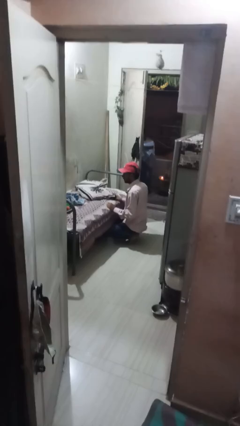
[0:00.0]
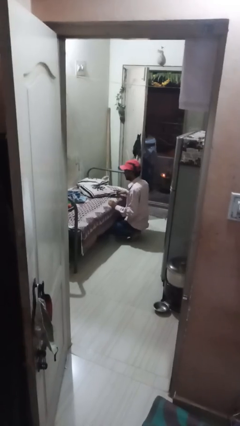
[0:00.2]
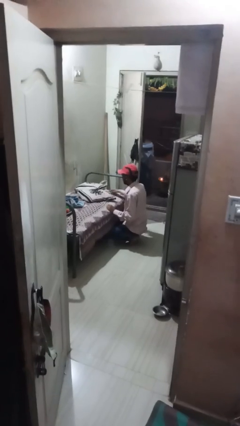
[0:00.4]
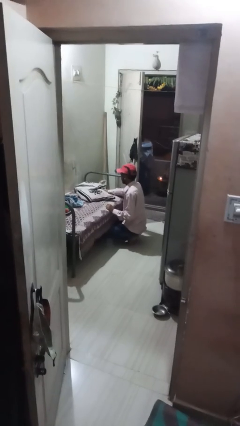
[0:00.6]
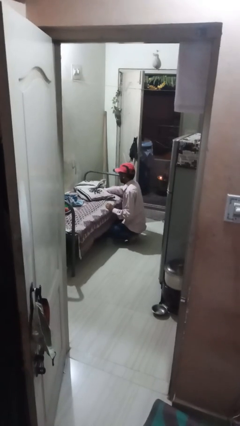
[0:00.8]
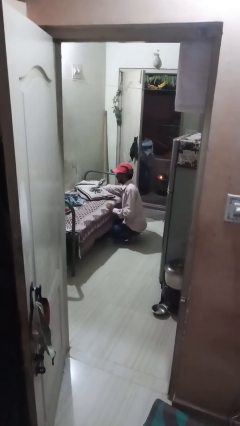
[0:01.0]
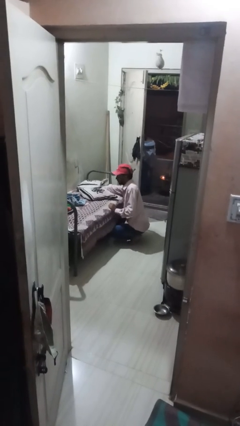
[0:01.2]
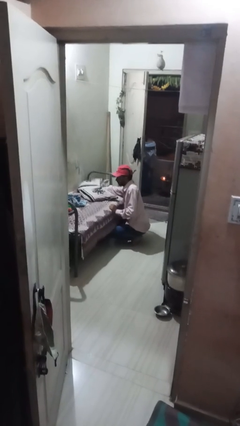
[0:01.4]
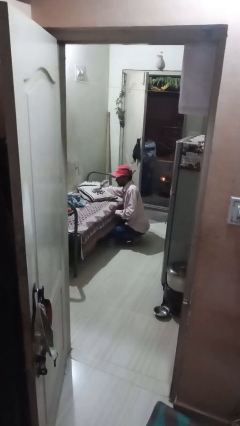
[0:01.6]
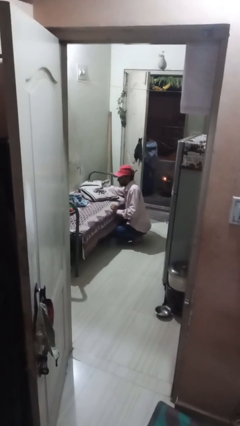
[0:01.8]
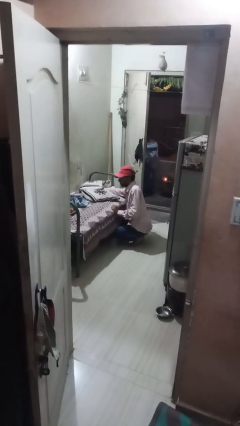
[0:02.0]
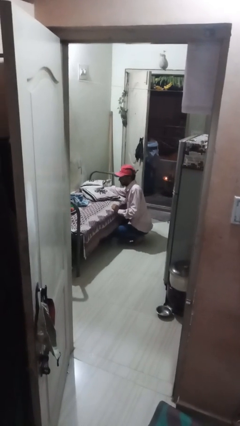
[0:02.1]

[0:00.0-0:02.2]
person searches in couch

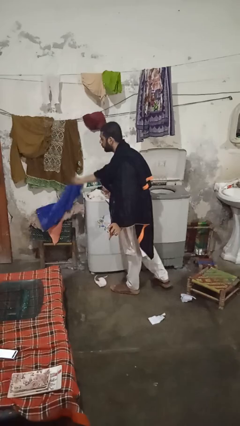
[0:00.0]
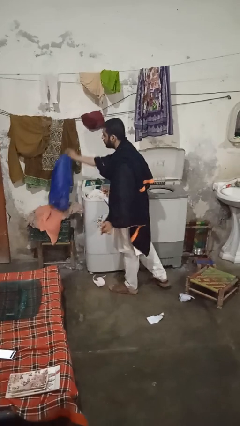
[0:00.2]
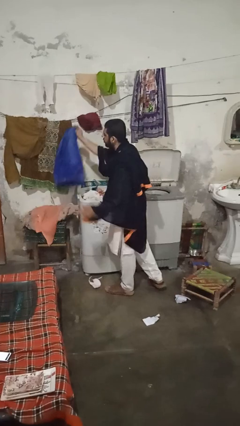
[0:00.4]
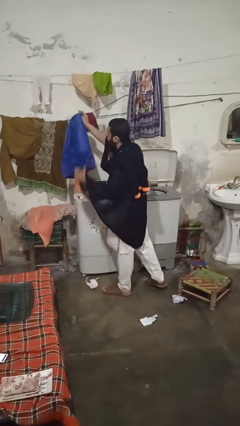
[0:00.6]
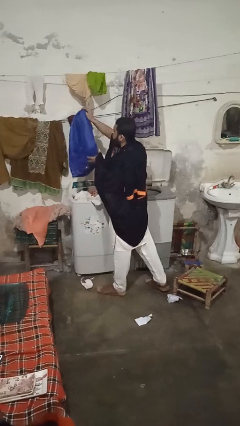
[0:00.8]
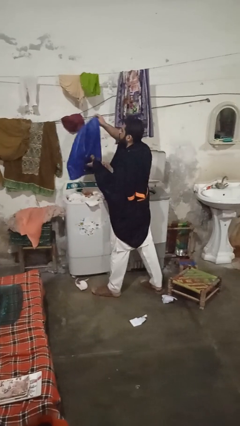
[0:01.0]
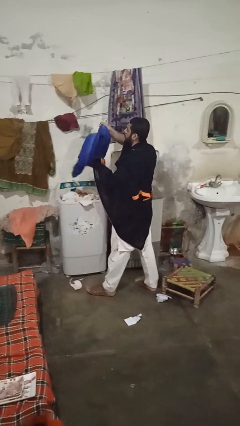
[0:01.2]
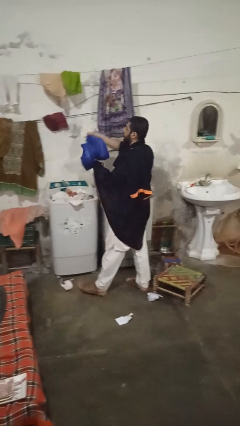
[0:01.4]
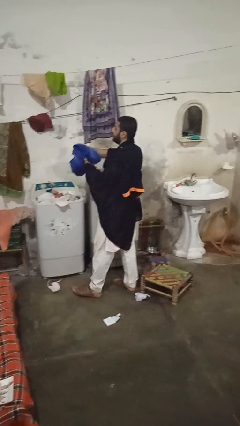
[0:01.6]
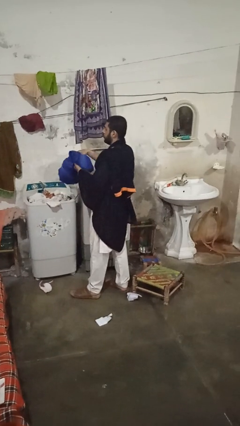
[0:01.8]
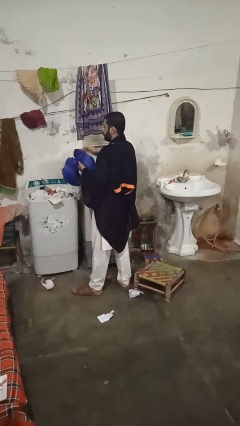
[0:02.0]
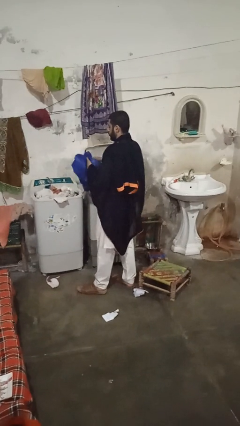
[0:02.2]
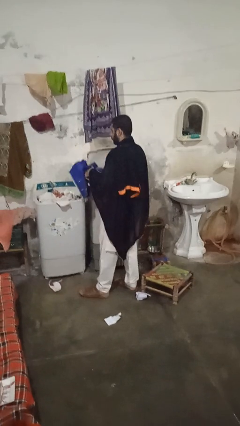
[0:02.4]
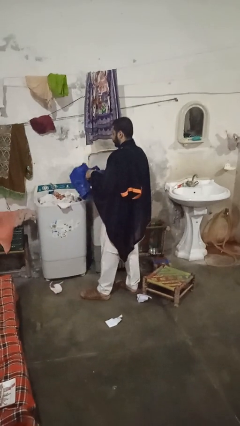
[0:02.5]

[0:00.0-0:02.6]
person loads clotheswasher

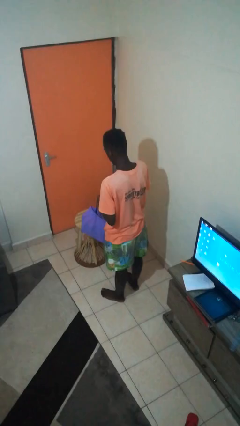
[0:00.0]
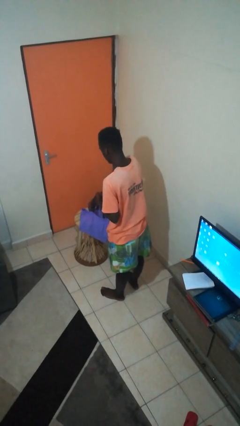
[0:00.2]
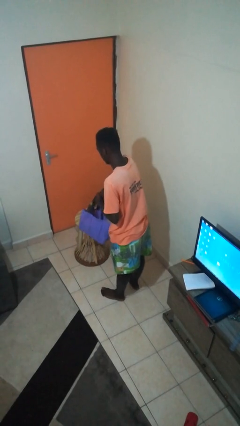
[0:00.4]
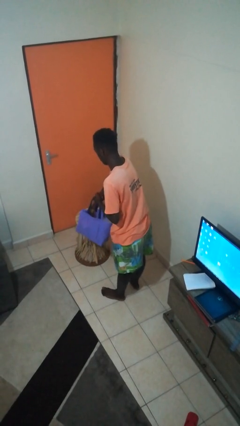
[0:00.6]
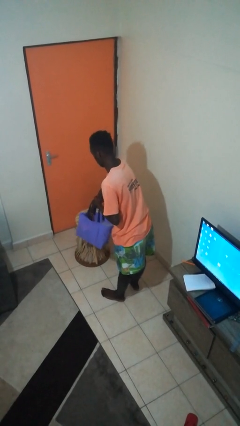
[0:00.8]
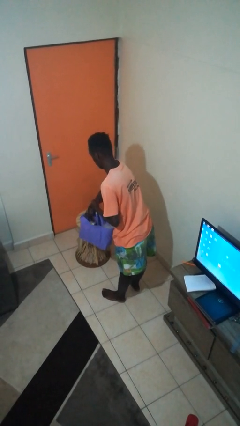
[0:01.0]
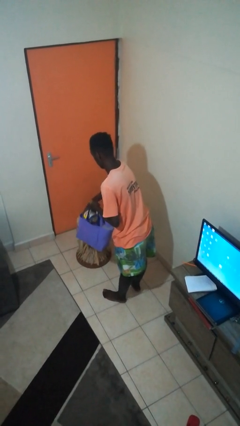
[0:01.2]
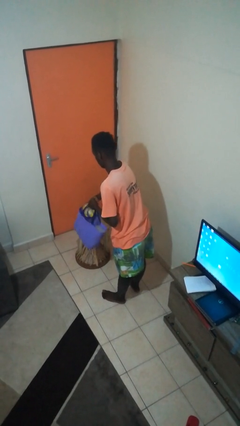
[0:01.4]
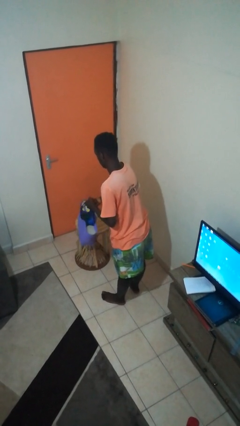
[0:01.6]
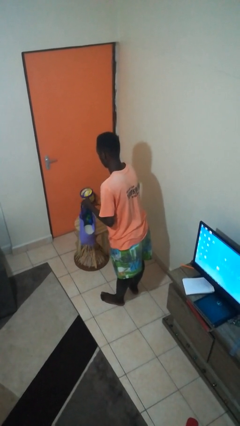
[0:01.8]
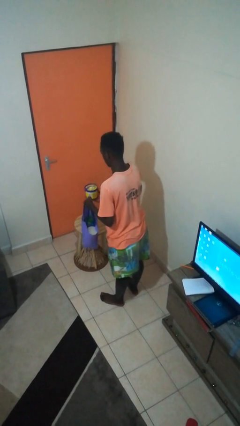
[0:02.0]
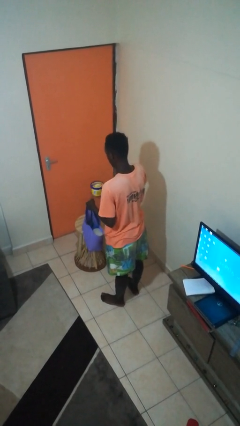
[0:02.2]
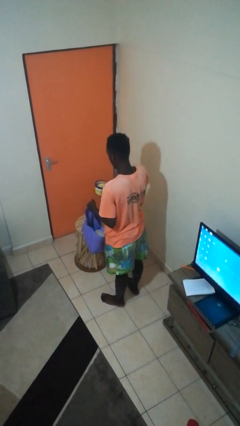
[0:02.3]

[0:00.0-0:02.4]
person takes object from bag

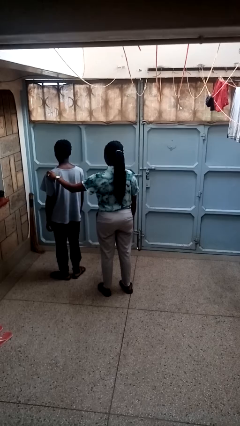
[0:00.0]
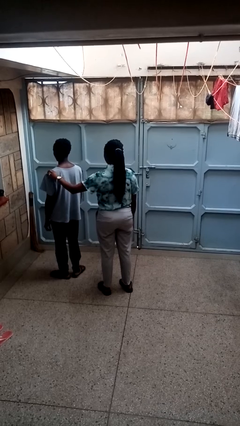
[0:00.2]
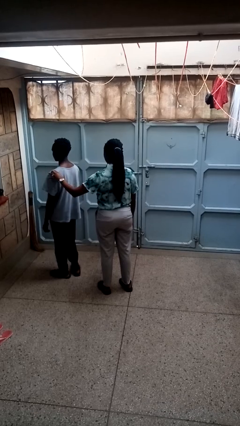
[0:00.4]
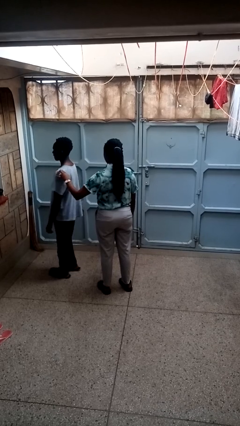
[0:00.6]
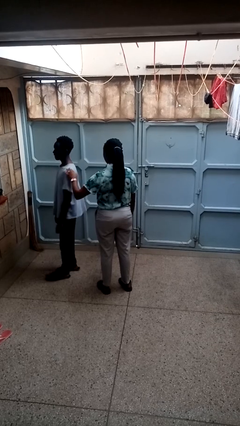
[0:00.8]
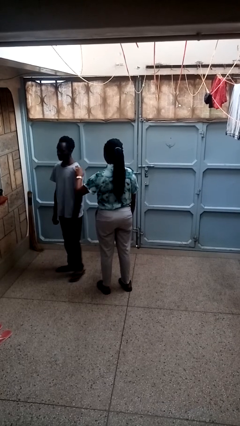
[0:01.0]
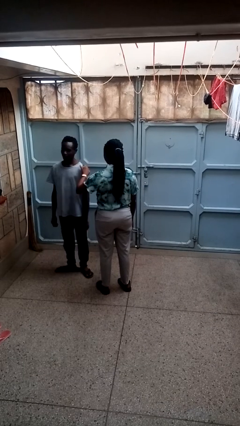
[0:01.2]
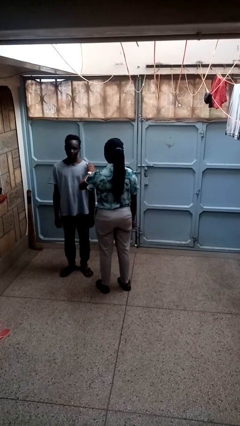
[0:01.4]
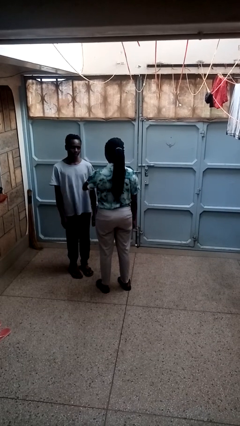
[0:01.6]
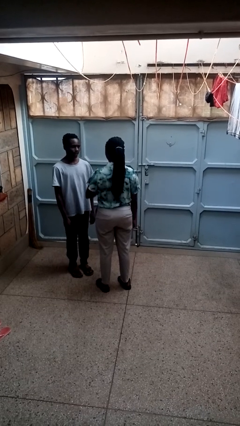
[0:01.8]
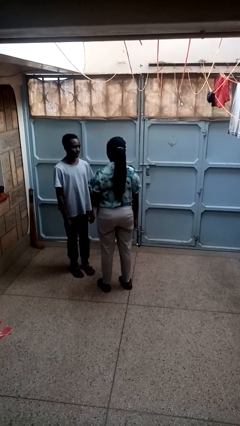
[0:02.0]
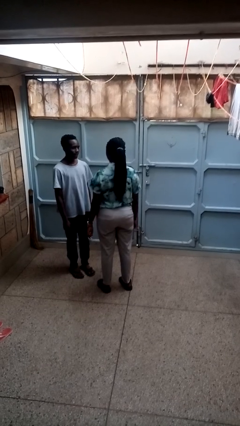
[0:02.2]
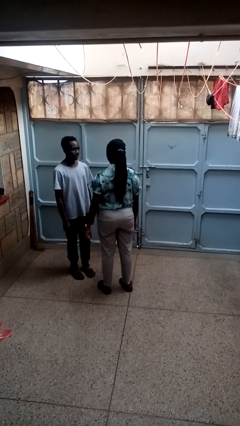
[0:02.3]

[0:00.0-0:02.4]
person spins person around

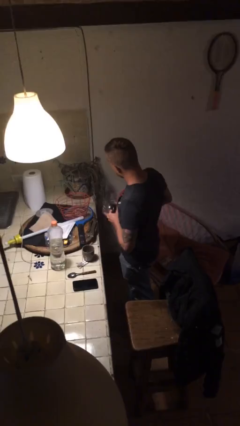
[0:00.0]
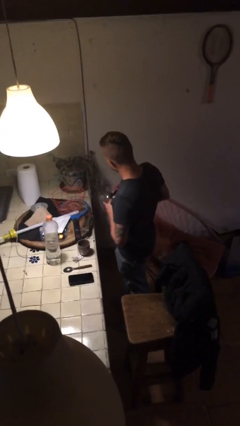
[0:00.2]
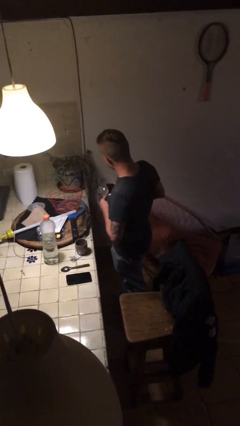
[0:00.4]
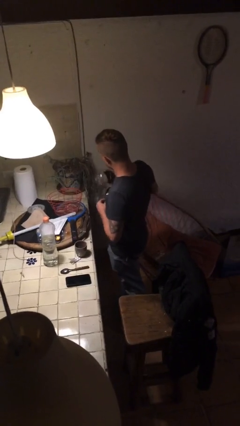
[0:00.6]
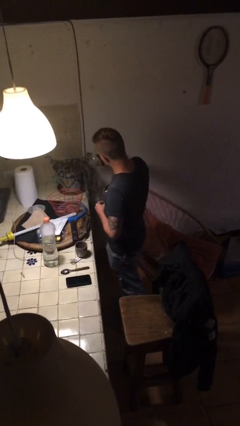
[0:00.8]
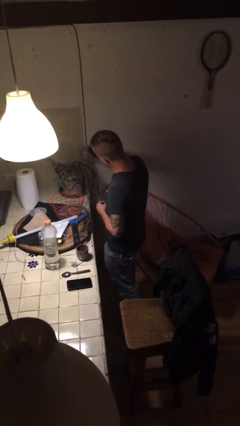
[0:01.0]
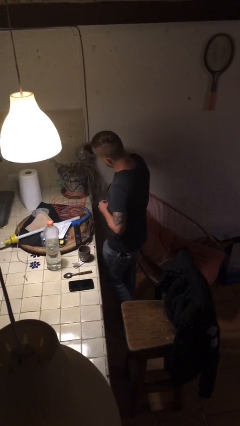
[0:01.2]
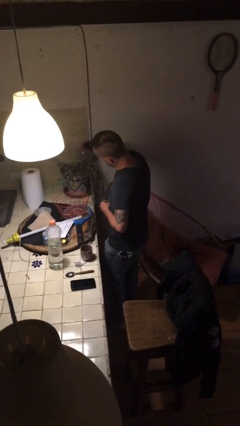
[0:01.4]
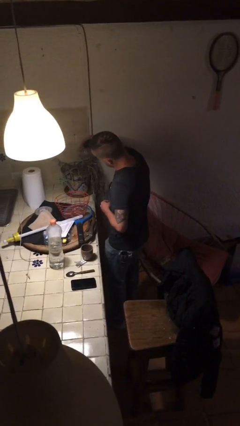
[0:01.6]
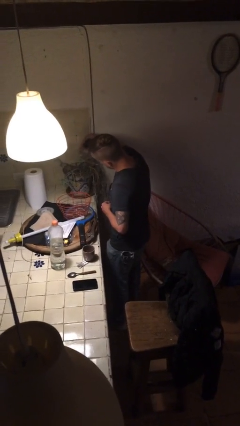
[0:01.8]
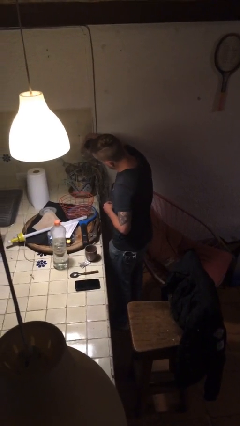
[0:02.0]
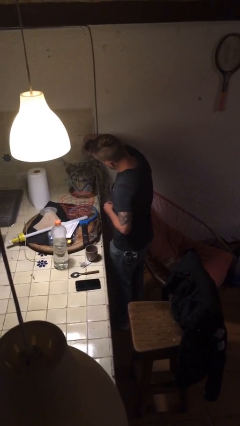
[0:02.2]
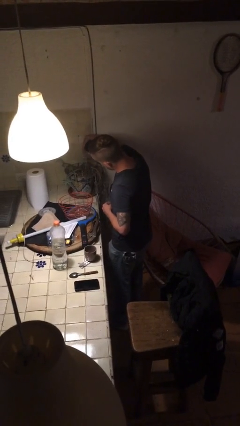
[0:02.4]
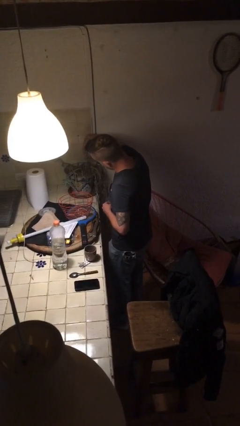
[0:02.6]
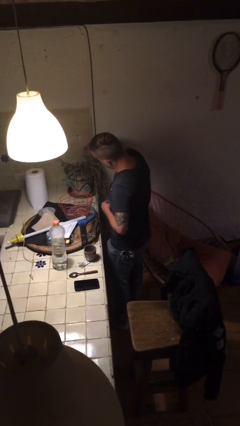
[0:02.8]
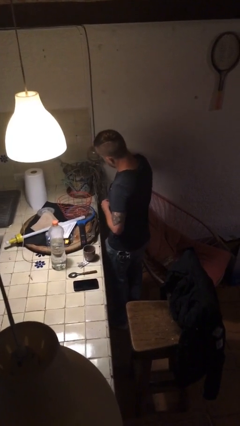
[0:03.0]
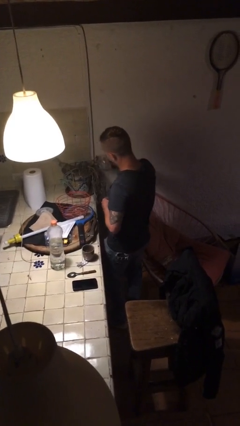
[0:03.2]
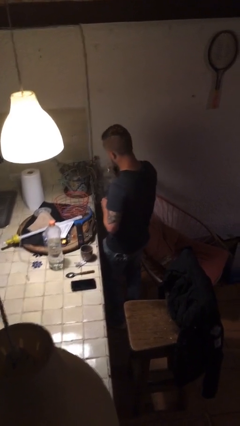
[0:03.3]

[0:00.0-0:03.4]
person waters houseplant

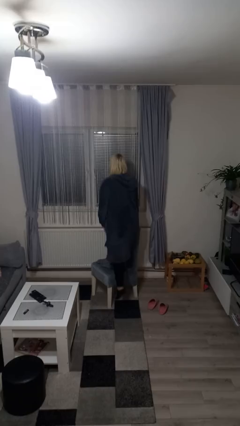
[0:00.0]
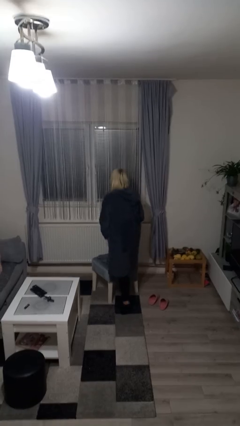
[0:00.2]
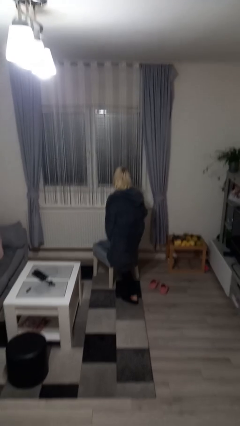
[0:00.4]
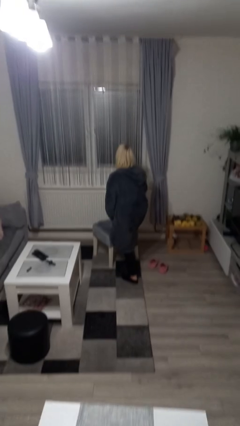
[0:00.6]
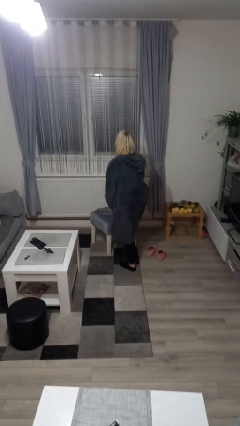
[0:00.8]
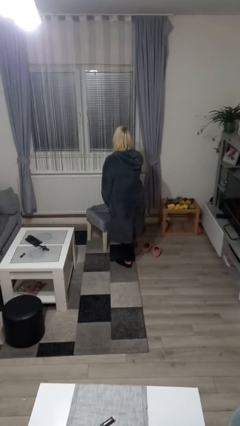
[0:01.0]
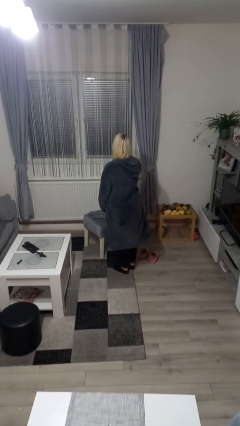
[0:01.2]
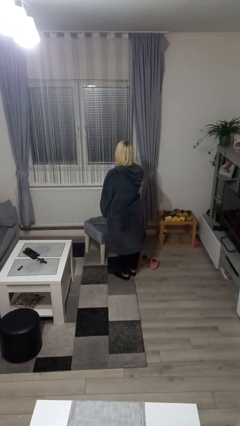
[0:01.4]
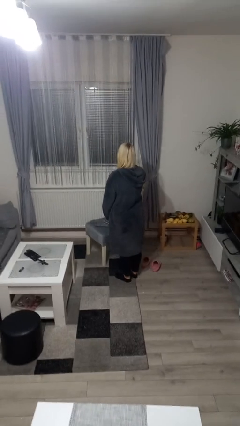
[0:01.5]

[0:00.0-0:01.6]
person climbs off chair

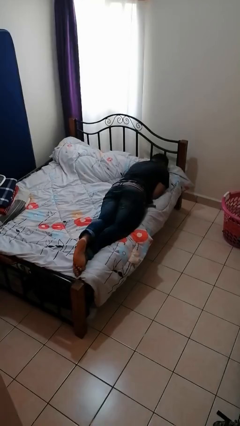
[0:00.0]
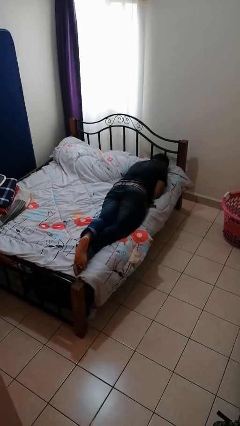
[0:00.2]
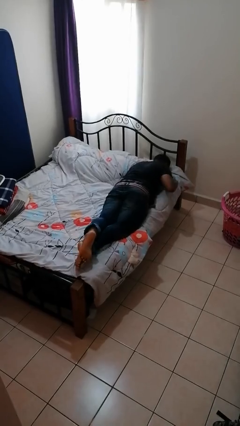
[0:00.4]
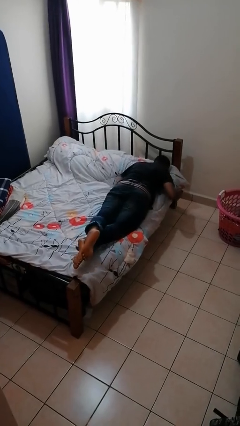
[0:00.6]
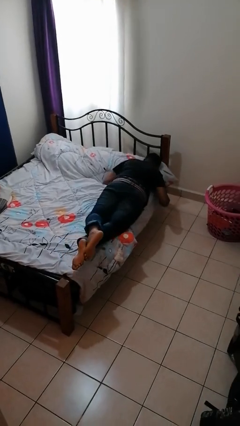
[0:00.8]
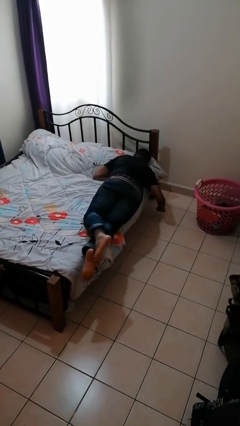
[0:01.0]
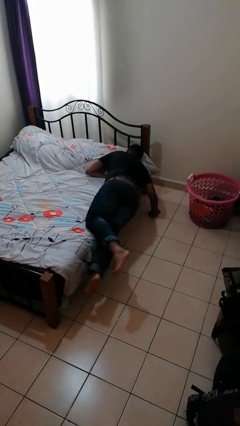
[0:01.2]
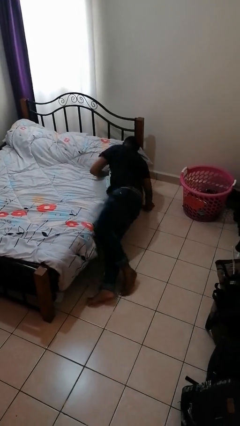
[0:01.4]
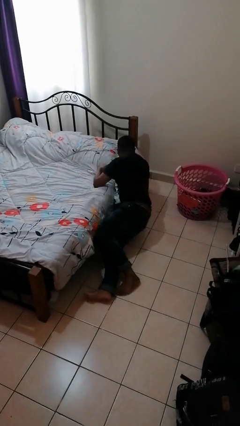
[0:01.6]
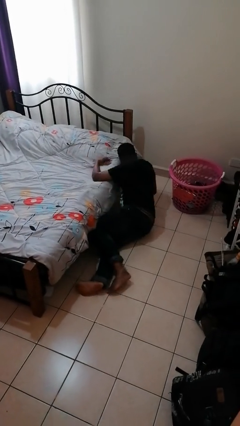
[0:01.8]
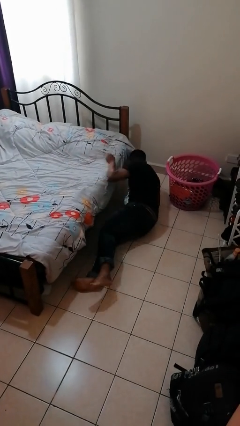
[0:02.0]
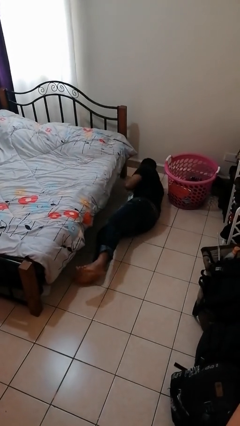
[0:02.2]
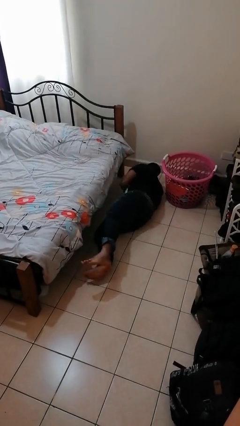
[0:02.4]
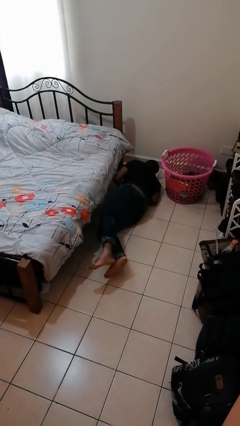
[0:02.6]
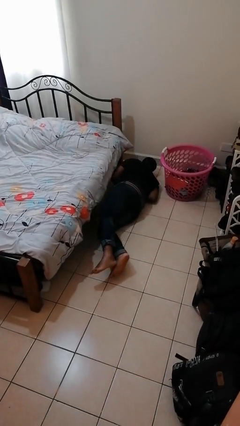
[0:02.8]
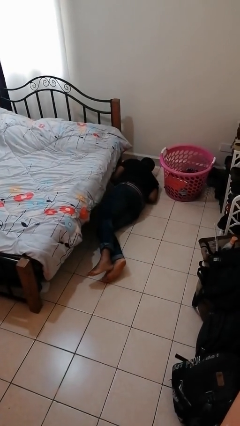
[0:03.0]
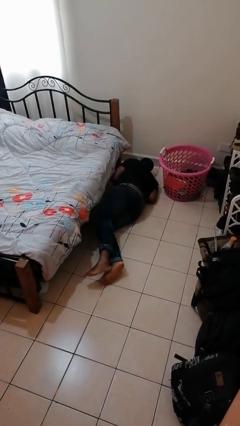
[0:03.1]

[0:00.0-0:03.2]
person falls from bed
